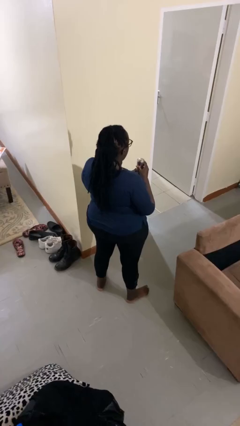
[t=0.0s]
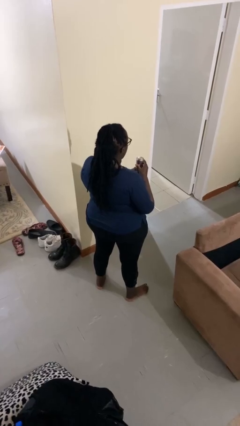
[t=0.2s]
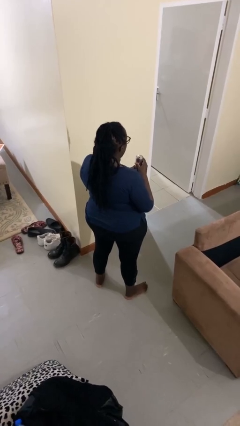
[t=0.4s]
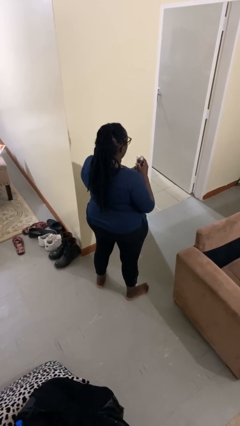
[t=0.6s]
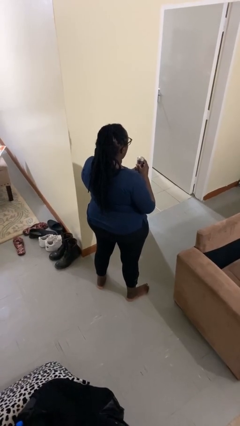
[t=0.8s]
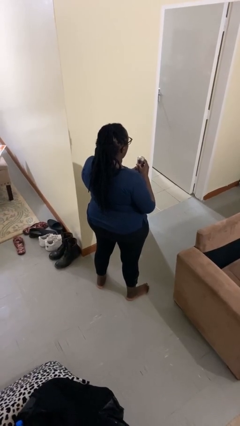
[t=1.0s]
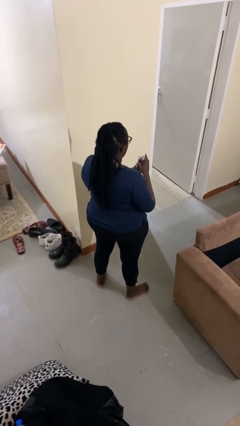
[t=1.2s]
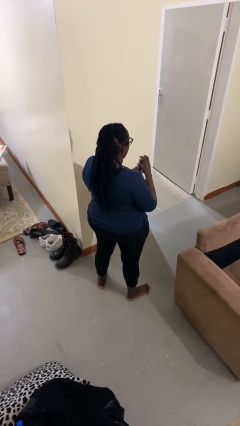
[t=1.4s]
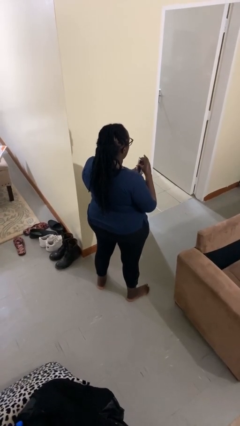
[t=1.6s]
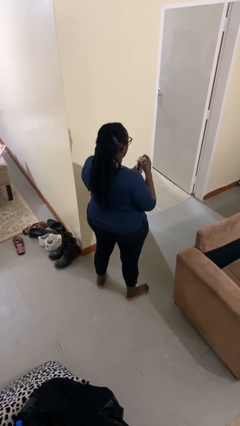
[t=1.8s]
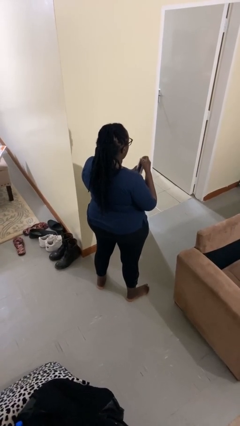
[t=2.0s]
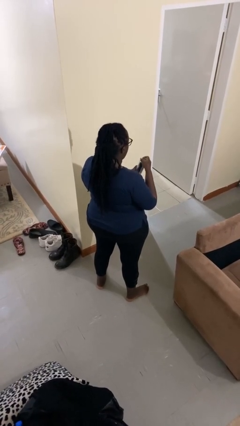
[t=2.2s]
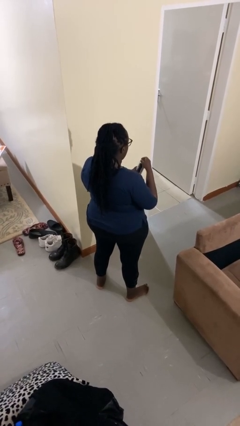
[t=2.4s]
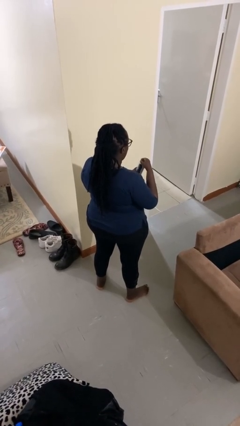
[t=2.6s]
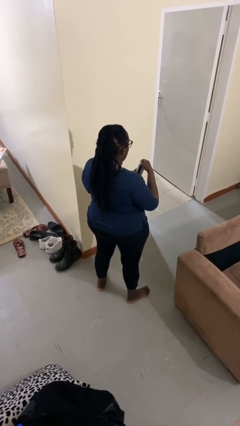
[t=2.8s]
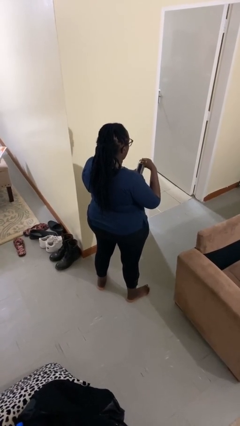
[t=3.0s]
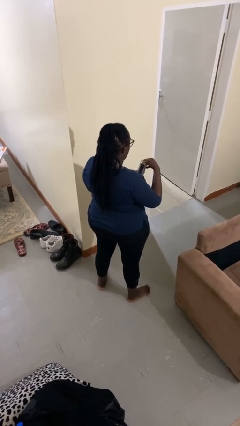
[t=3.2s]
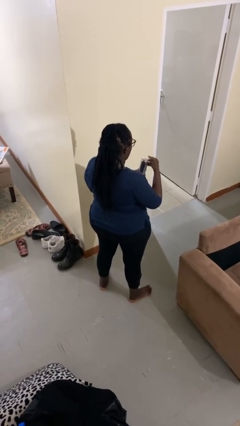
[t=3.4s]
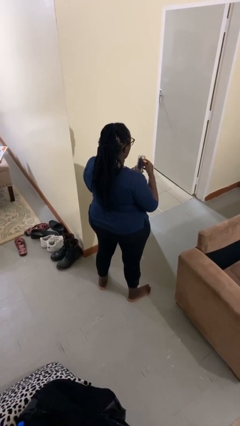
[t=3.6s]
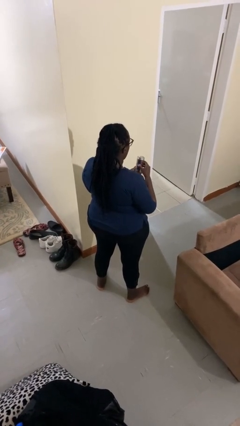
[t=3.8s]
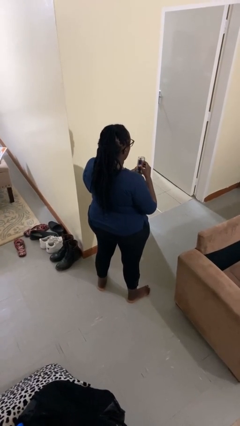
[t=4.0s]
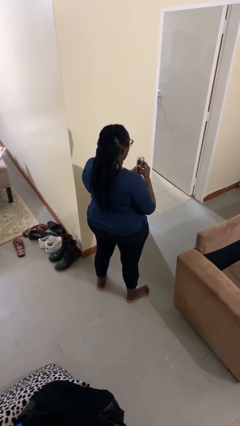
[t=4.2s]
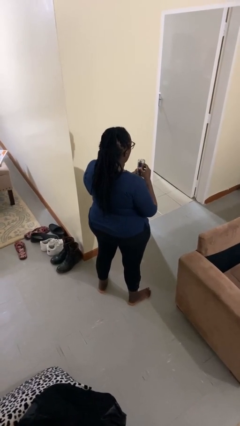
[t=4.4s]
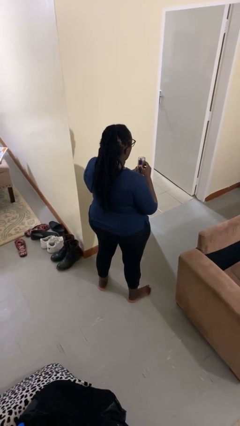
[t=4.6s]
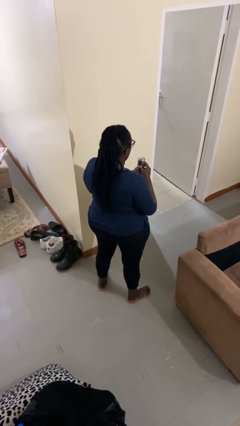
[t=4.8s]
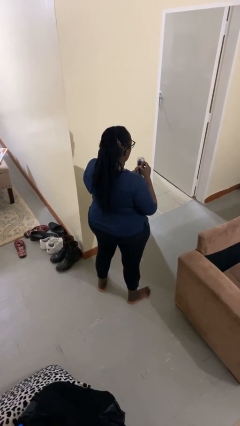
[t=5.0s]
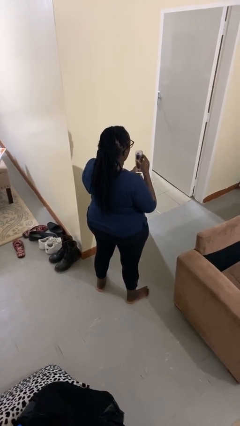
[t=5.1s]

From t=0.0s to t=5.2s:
person opens beverage can

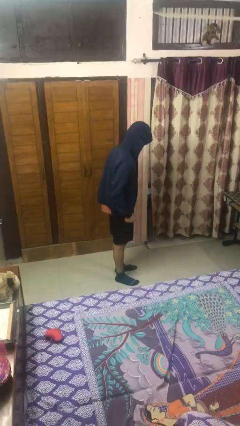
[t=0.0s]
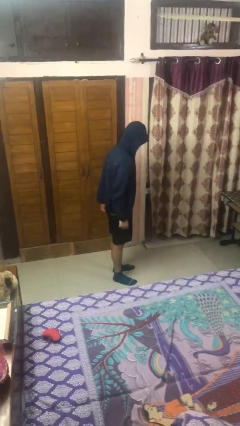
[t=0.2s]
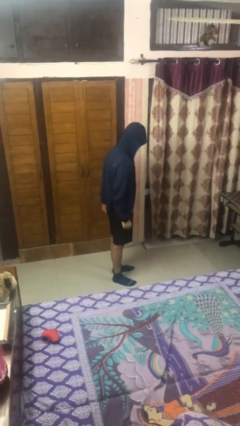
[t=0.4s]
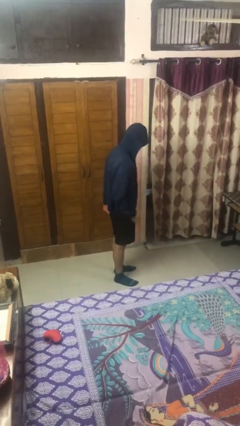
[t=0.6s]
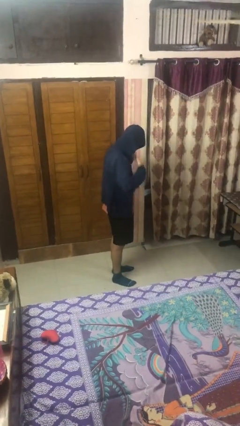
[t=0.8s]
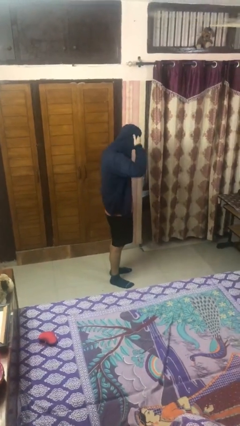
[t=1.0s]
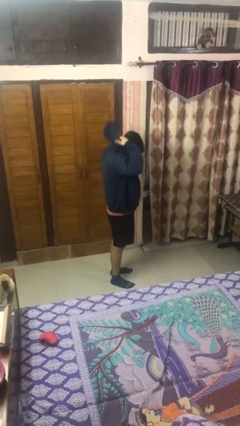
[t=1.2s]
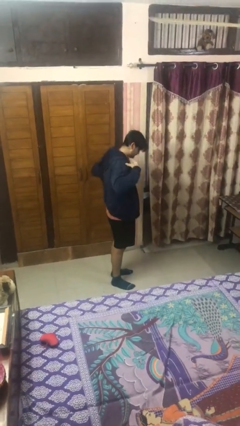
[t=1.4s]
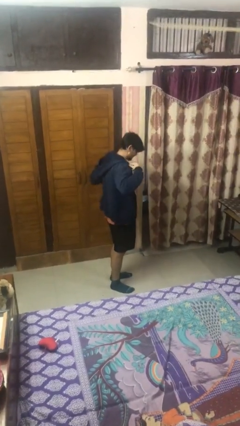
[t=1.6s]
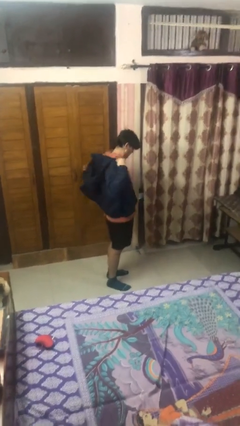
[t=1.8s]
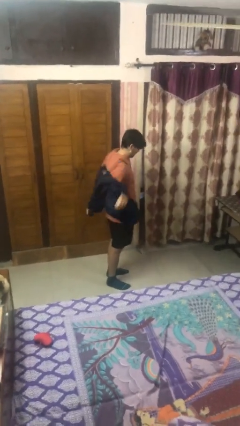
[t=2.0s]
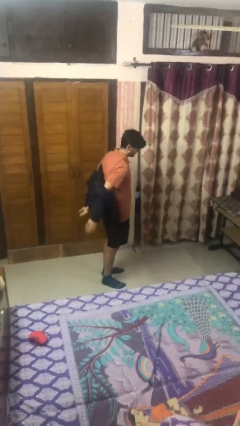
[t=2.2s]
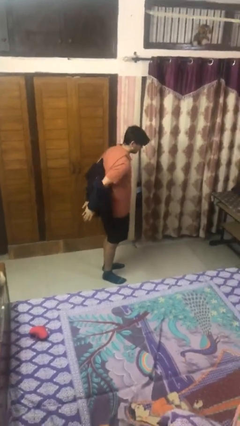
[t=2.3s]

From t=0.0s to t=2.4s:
person takes off hoodie

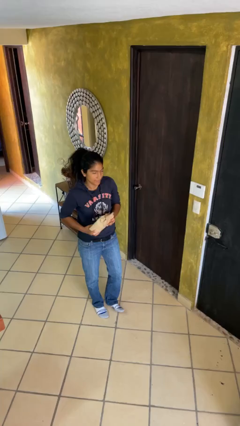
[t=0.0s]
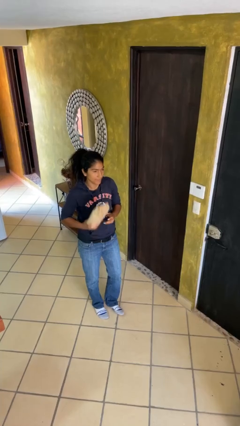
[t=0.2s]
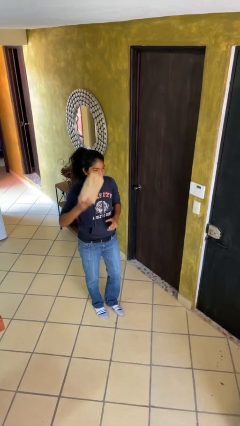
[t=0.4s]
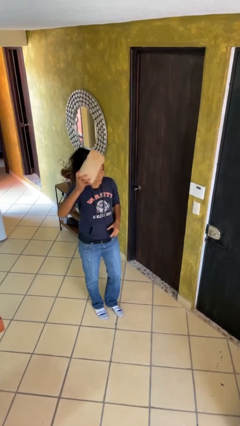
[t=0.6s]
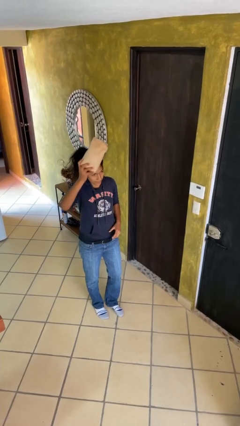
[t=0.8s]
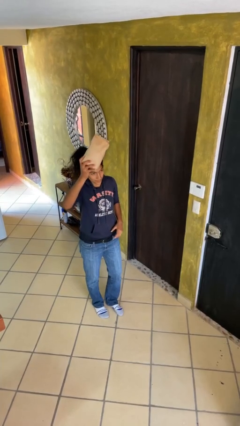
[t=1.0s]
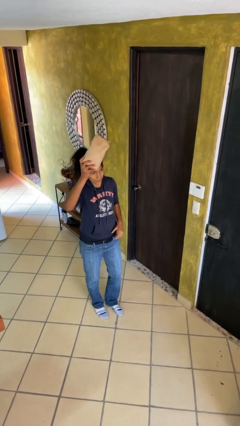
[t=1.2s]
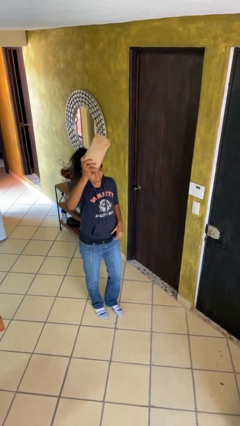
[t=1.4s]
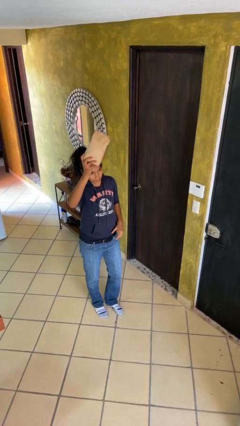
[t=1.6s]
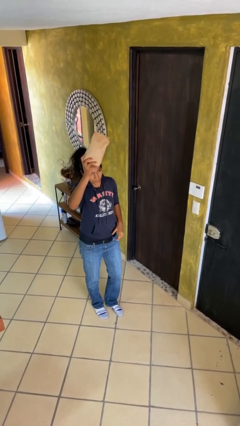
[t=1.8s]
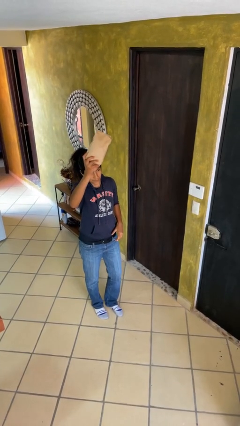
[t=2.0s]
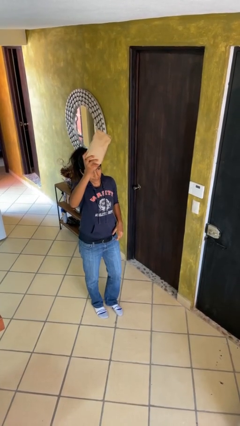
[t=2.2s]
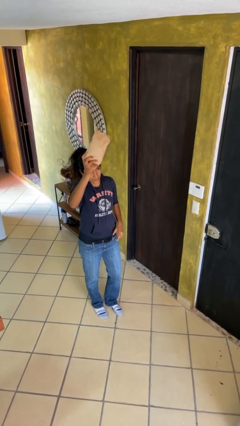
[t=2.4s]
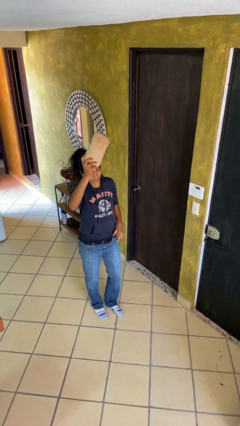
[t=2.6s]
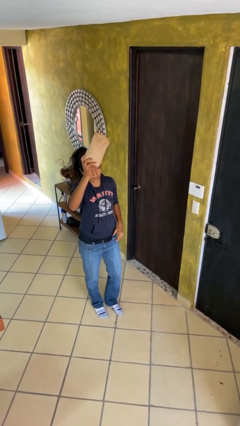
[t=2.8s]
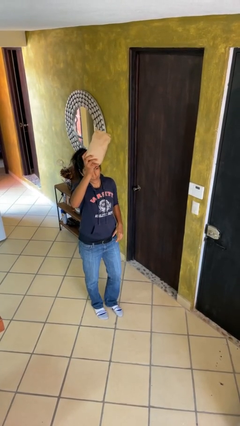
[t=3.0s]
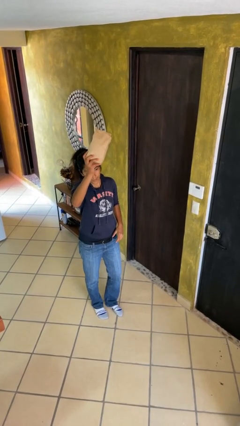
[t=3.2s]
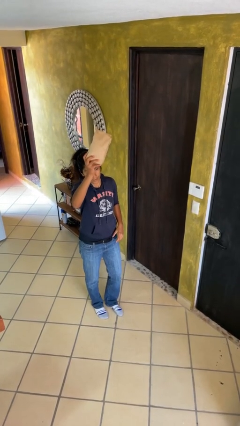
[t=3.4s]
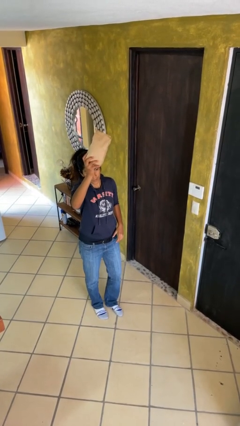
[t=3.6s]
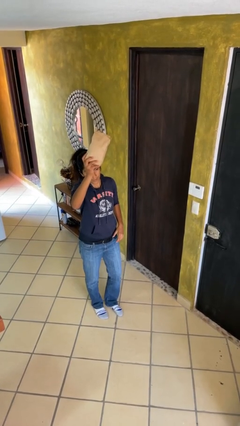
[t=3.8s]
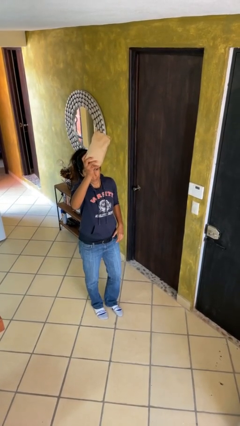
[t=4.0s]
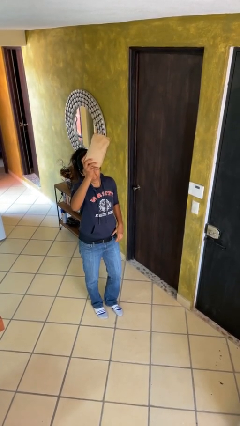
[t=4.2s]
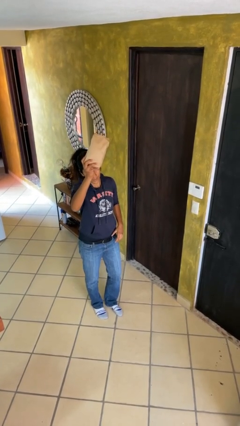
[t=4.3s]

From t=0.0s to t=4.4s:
person holds object above head

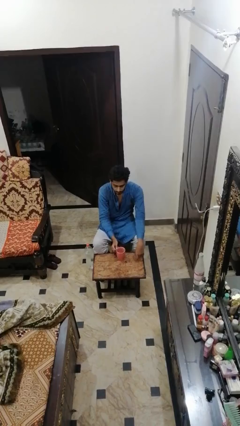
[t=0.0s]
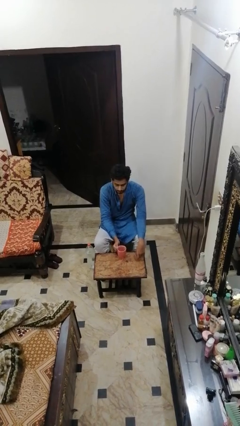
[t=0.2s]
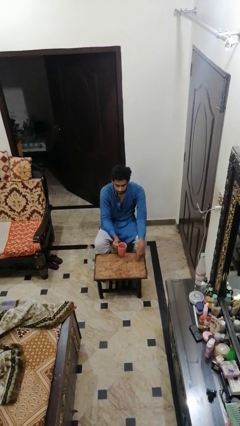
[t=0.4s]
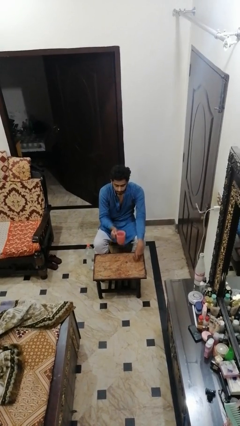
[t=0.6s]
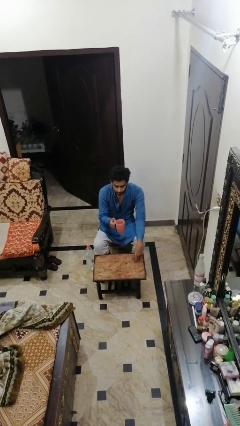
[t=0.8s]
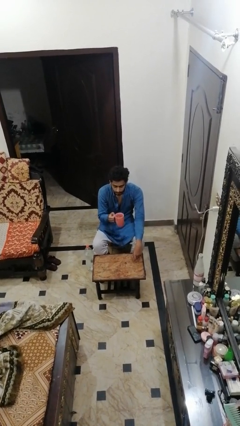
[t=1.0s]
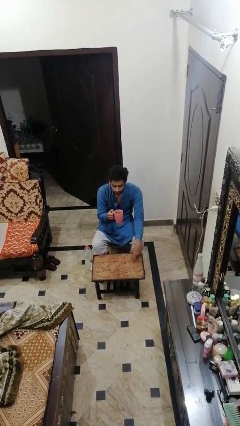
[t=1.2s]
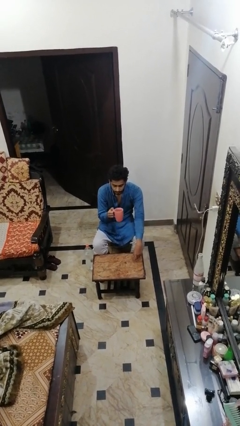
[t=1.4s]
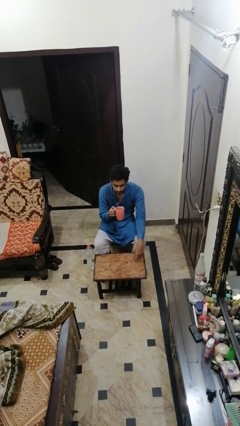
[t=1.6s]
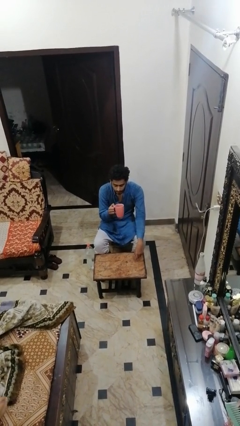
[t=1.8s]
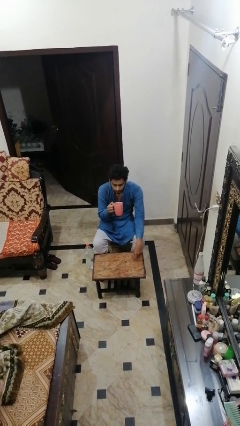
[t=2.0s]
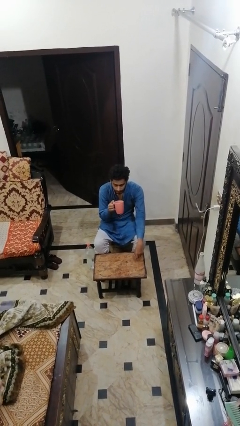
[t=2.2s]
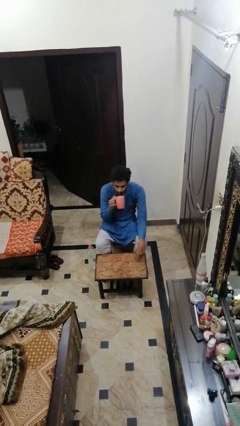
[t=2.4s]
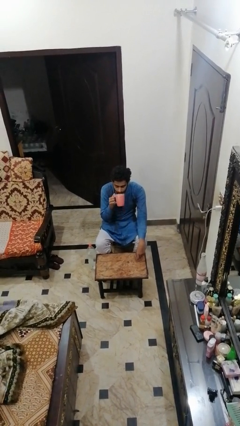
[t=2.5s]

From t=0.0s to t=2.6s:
person picks up object from table

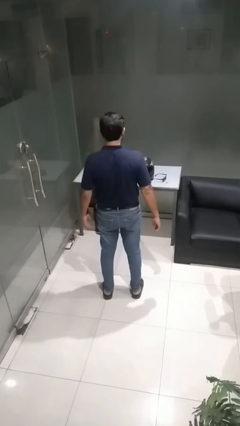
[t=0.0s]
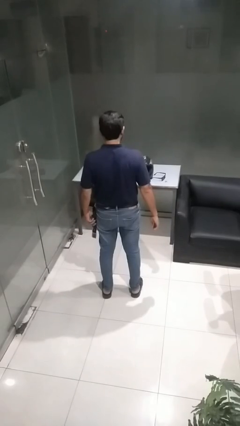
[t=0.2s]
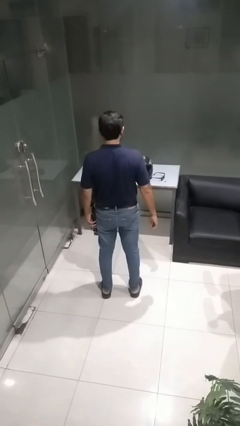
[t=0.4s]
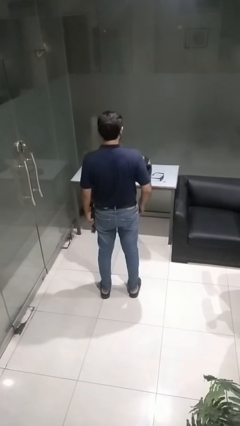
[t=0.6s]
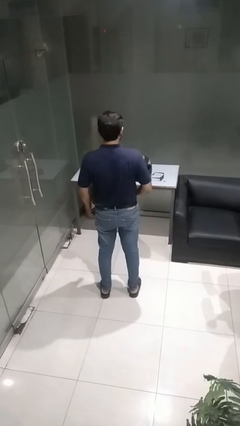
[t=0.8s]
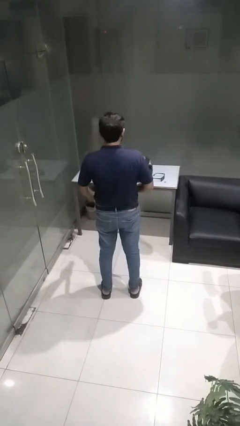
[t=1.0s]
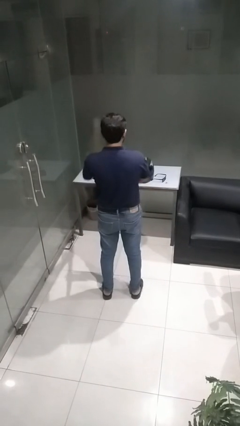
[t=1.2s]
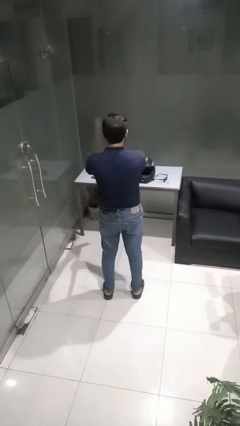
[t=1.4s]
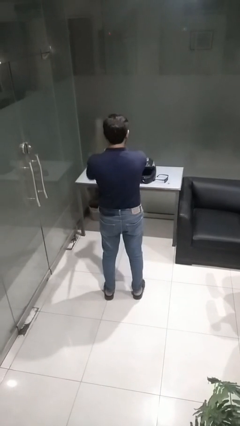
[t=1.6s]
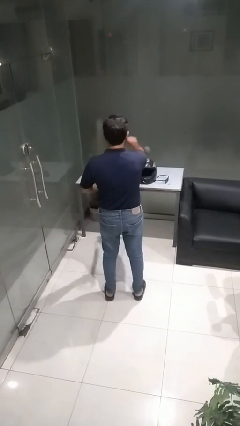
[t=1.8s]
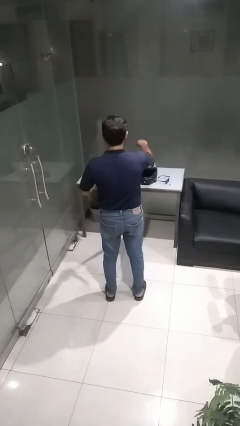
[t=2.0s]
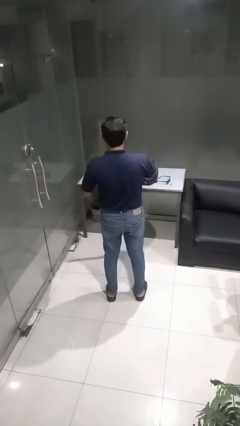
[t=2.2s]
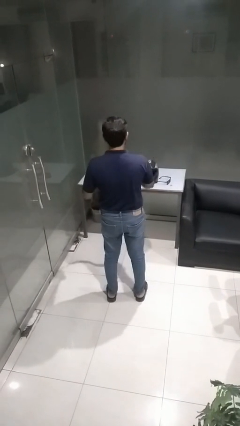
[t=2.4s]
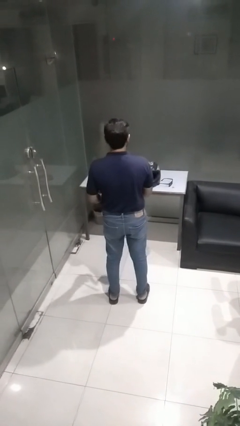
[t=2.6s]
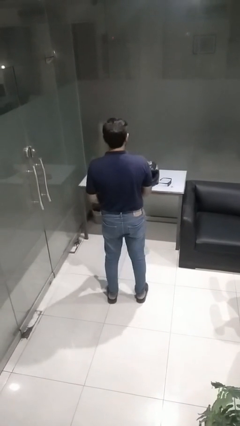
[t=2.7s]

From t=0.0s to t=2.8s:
person takes off belt

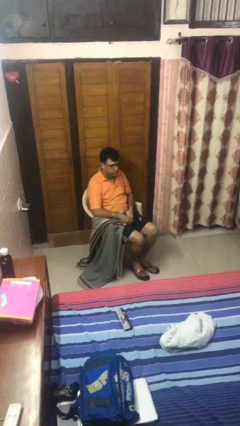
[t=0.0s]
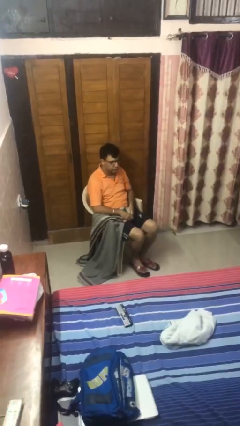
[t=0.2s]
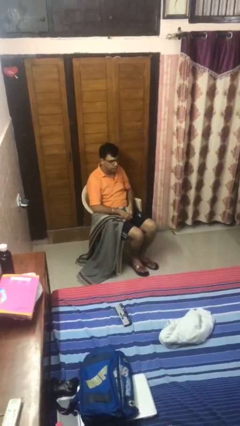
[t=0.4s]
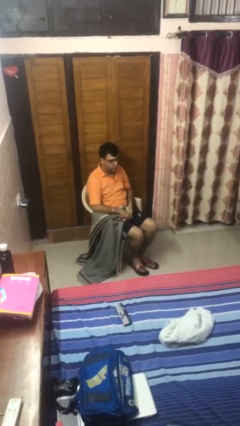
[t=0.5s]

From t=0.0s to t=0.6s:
person uncovers with blanket
